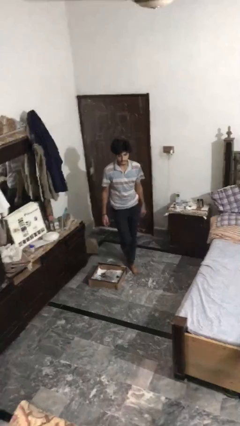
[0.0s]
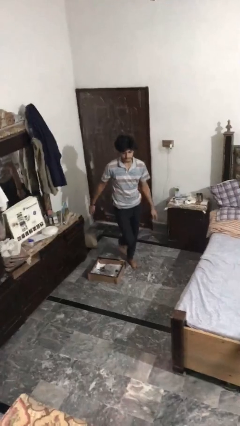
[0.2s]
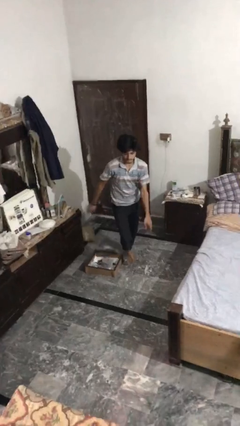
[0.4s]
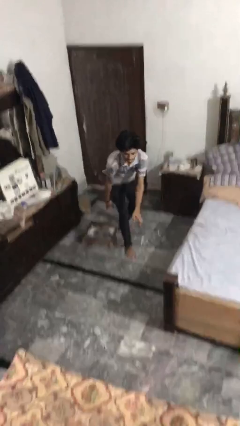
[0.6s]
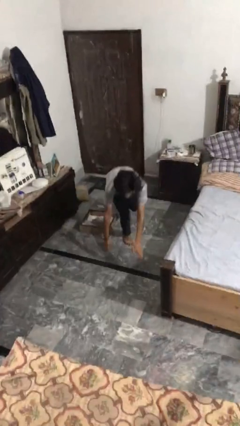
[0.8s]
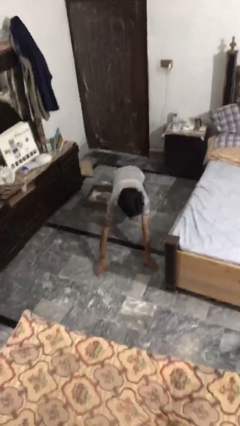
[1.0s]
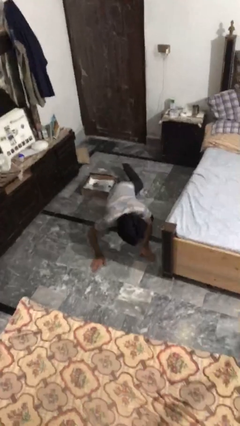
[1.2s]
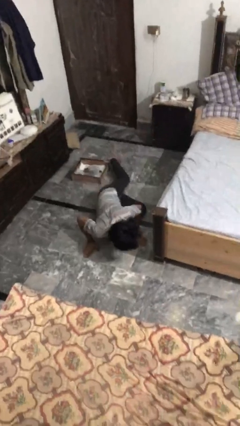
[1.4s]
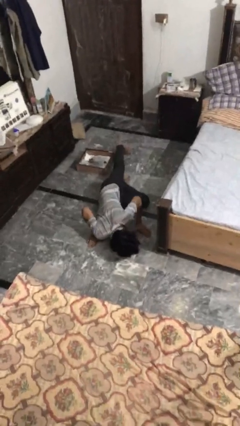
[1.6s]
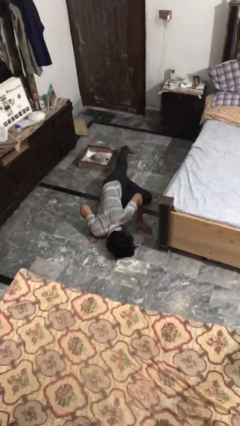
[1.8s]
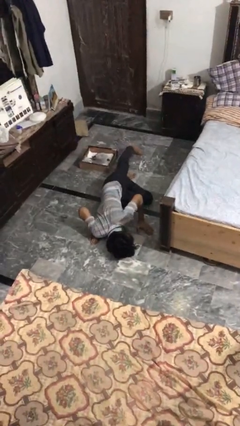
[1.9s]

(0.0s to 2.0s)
person trips on object on floor

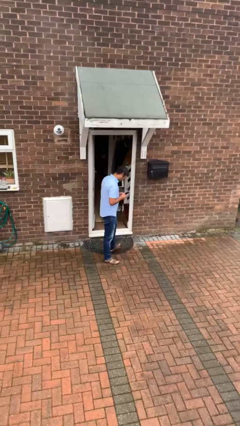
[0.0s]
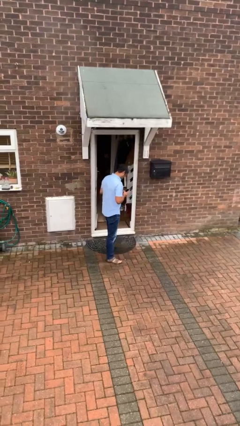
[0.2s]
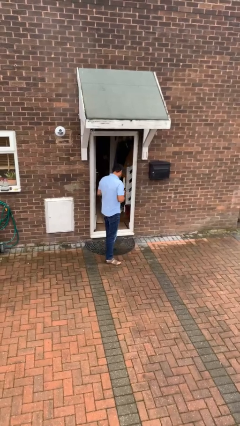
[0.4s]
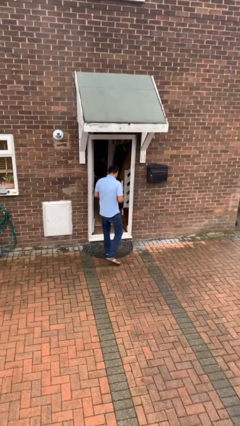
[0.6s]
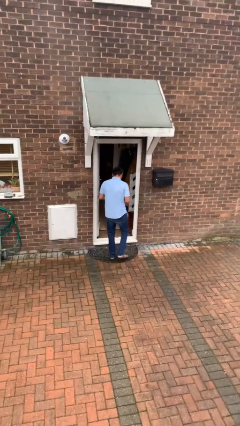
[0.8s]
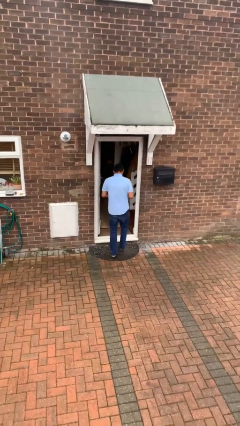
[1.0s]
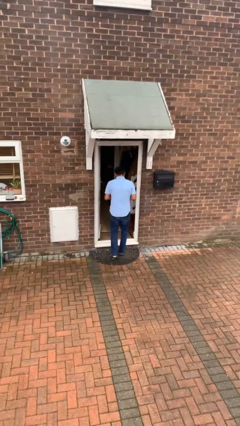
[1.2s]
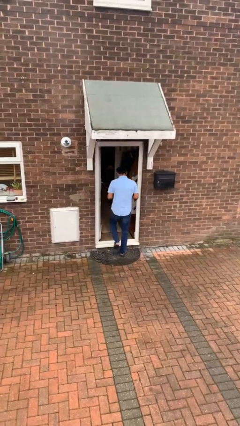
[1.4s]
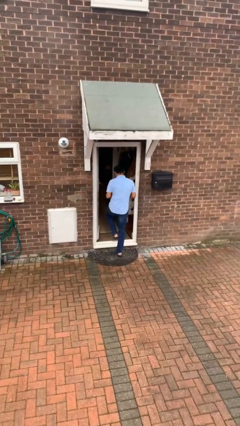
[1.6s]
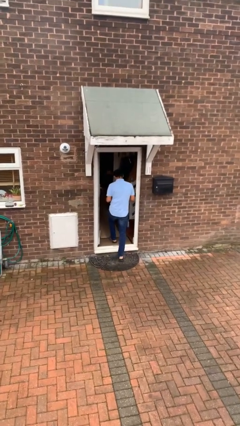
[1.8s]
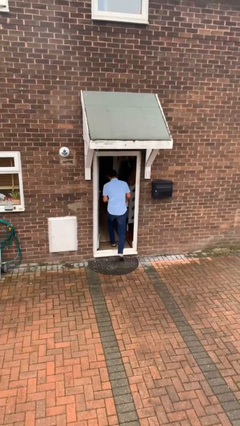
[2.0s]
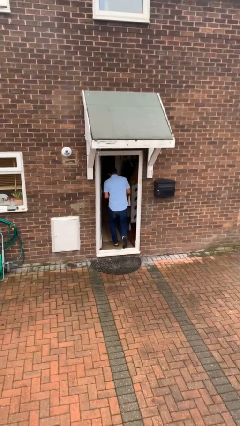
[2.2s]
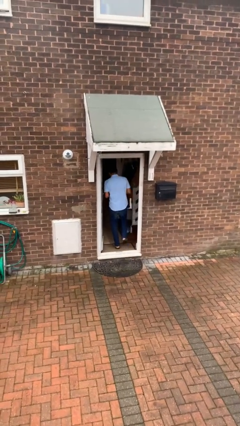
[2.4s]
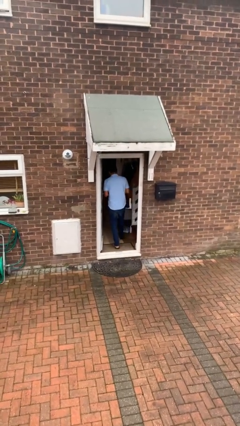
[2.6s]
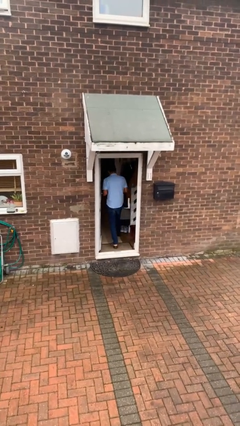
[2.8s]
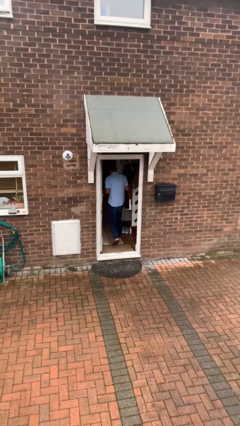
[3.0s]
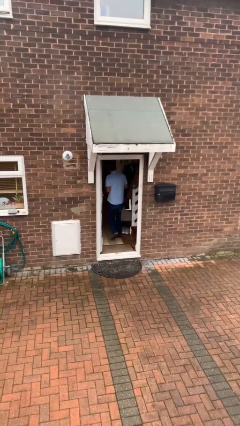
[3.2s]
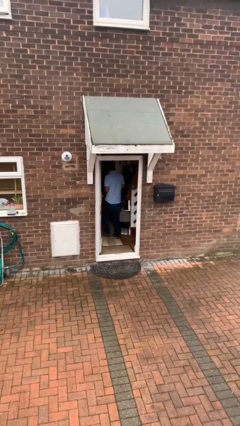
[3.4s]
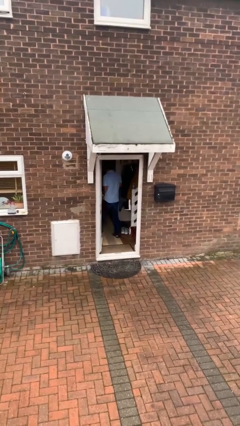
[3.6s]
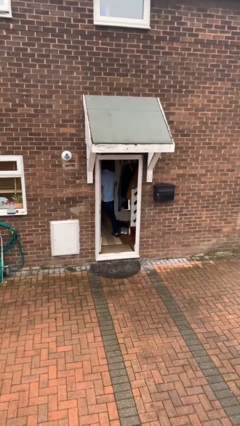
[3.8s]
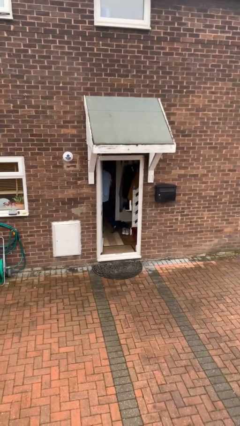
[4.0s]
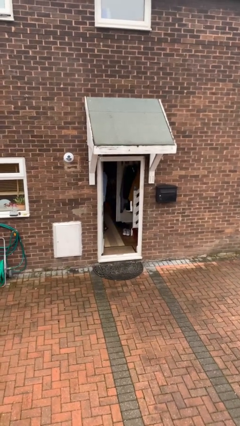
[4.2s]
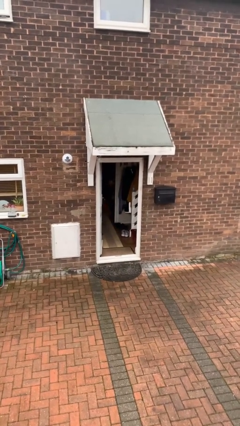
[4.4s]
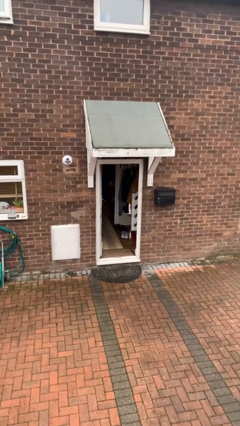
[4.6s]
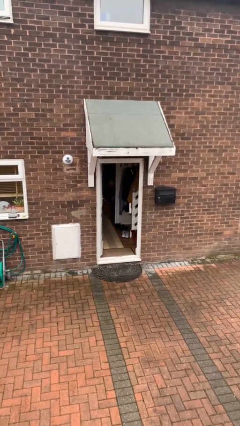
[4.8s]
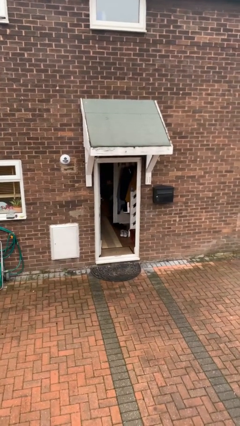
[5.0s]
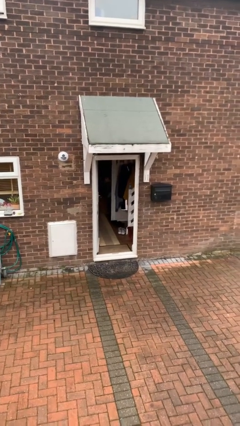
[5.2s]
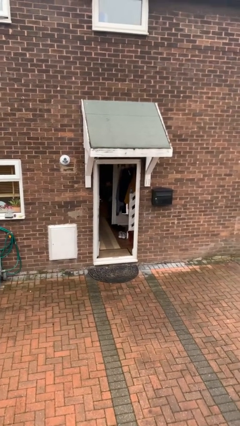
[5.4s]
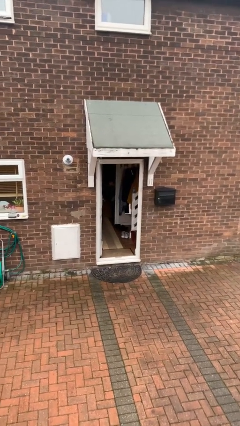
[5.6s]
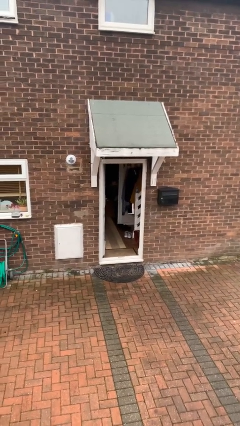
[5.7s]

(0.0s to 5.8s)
person exits scene through structure

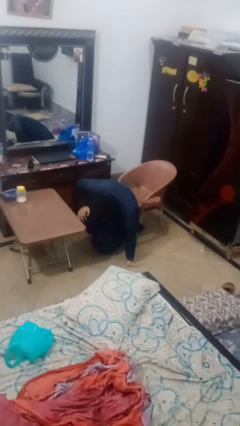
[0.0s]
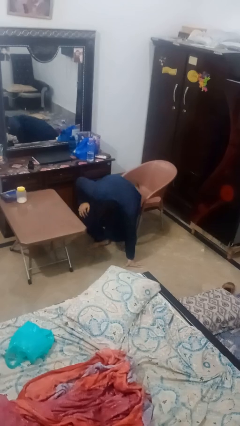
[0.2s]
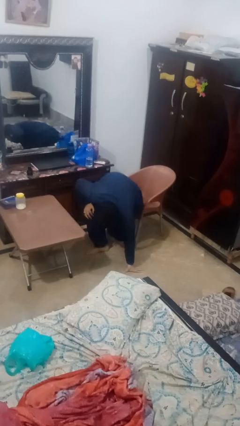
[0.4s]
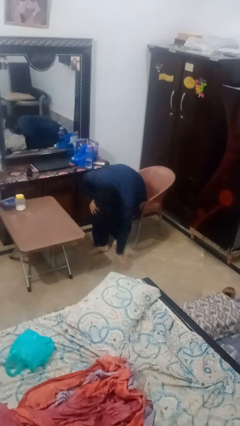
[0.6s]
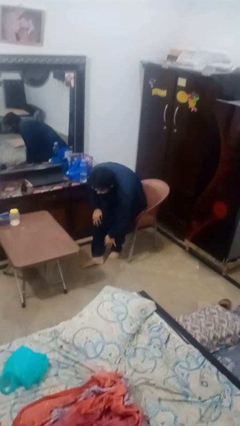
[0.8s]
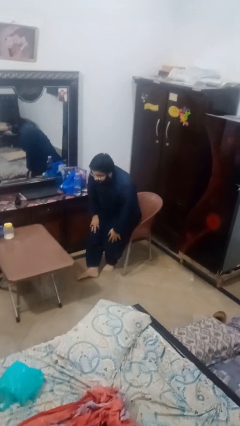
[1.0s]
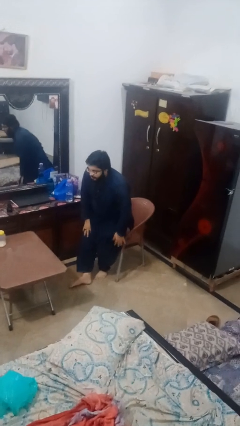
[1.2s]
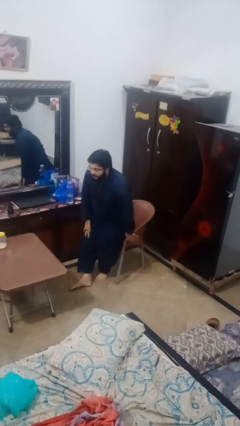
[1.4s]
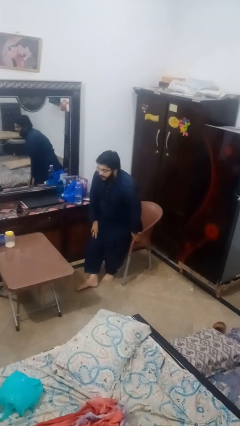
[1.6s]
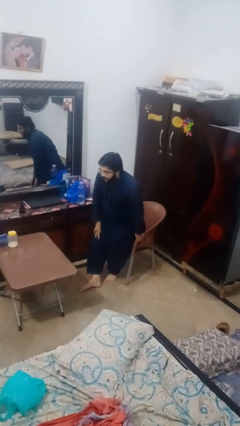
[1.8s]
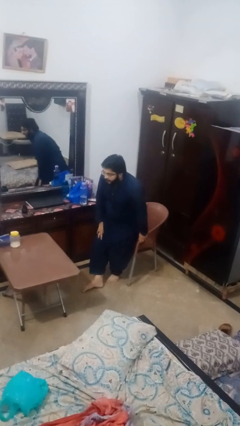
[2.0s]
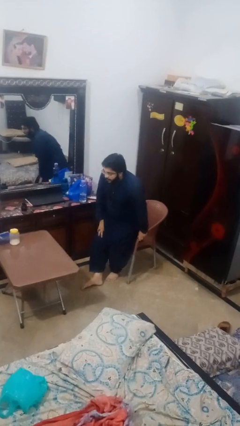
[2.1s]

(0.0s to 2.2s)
person stands up from floor

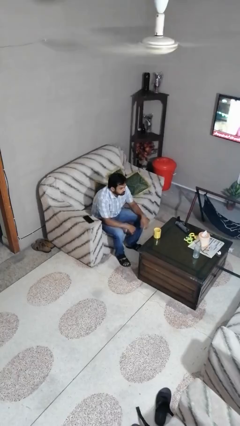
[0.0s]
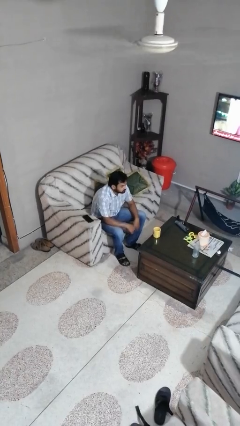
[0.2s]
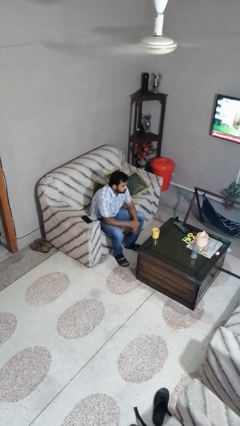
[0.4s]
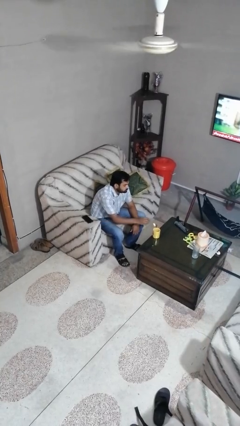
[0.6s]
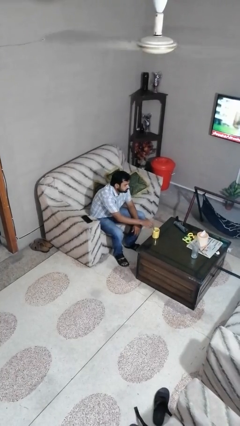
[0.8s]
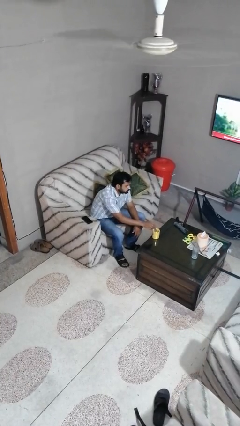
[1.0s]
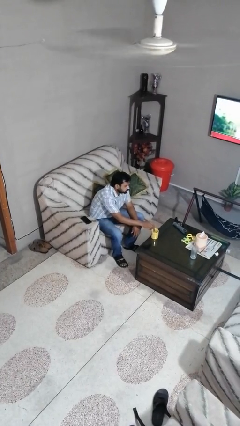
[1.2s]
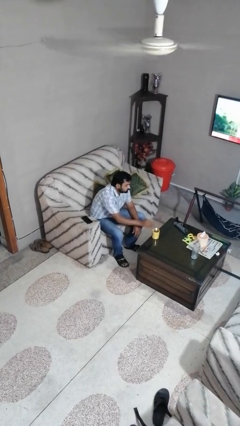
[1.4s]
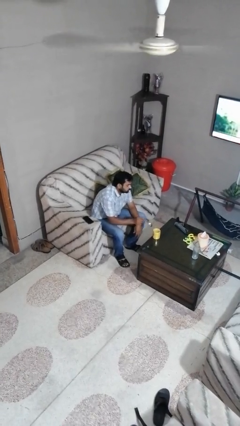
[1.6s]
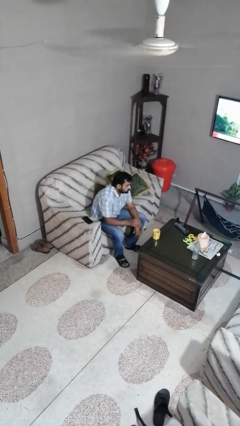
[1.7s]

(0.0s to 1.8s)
person stirs mug

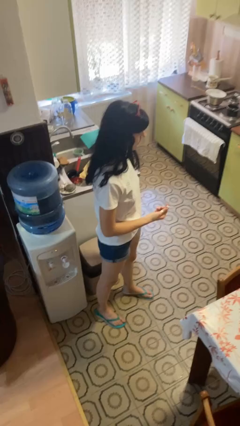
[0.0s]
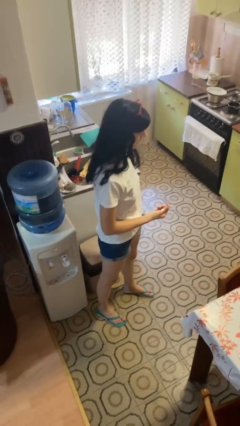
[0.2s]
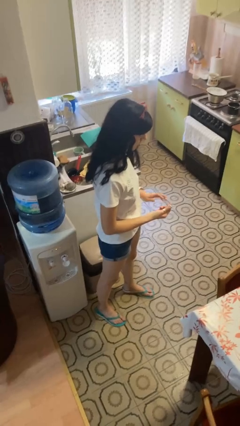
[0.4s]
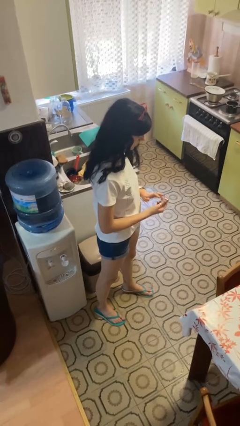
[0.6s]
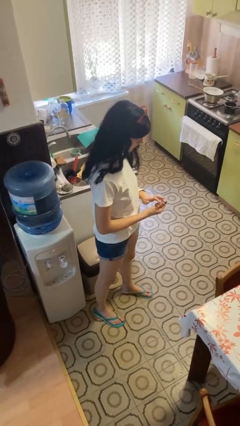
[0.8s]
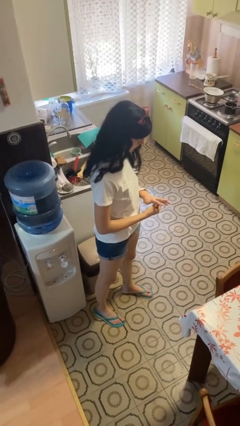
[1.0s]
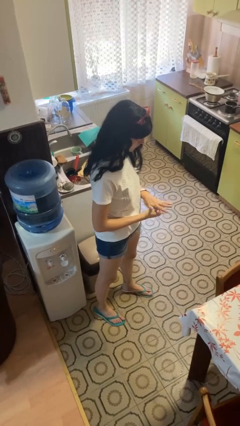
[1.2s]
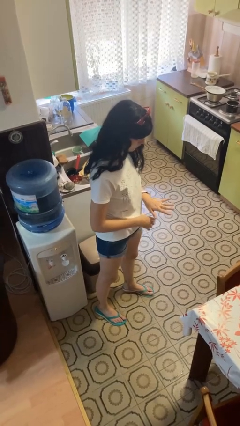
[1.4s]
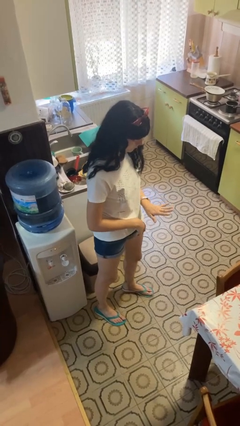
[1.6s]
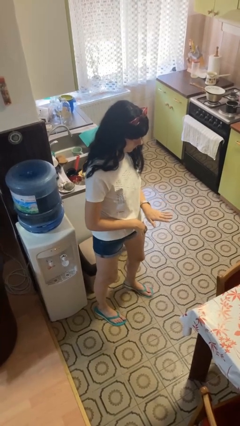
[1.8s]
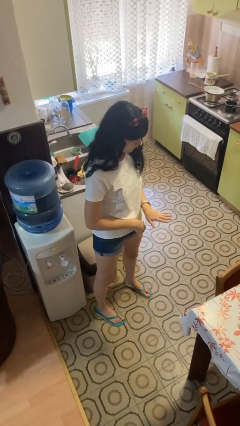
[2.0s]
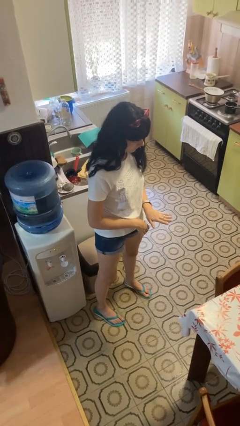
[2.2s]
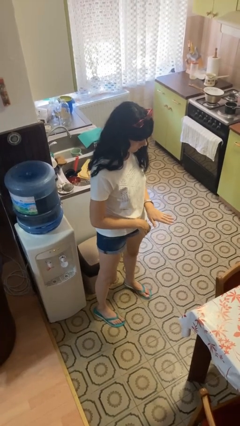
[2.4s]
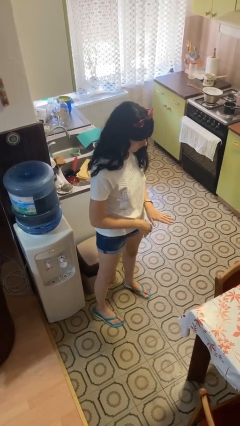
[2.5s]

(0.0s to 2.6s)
person puts on ring

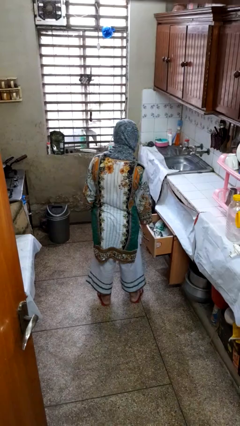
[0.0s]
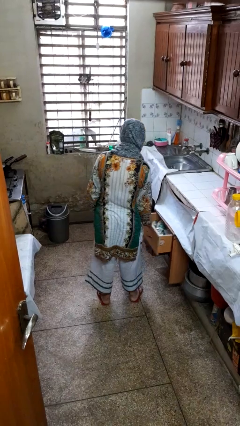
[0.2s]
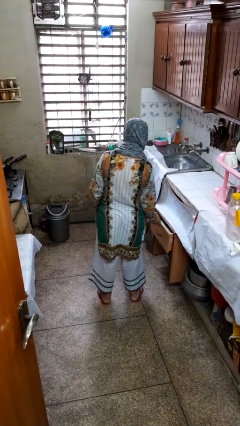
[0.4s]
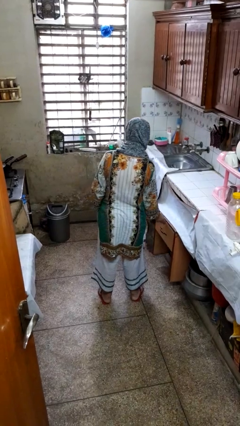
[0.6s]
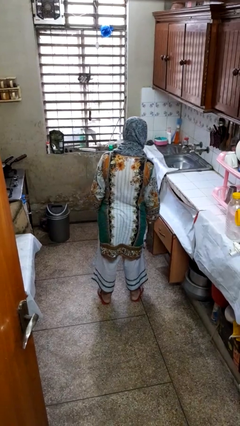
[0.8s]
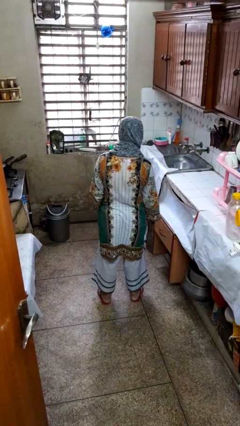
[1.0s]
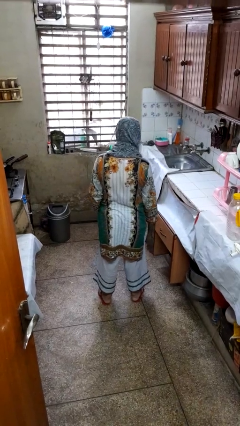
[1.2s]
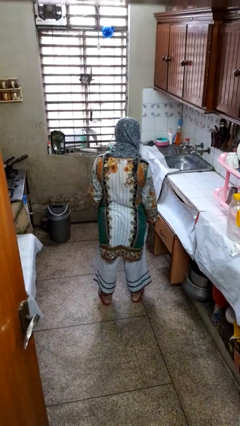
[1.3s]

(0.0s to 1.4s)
person closes kitchen drawer

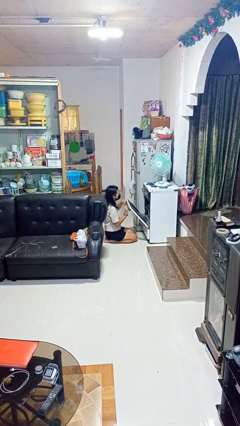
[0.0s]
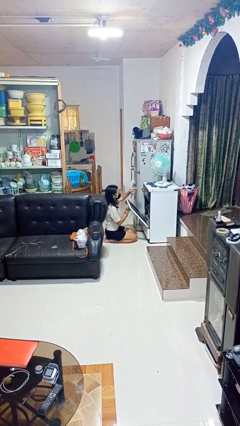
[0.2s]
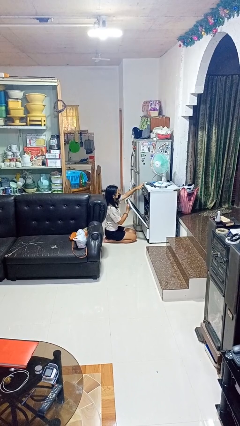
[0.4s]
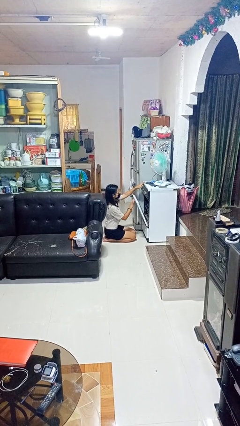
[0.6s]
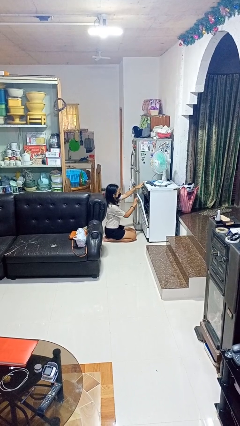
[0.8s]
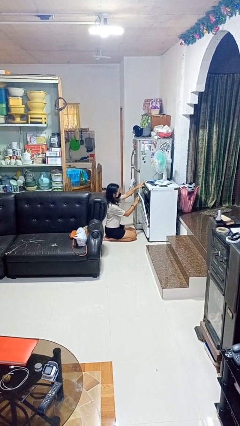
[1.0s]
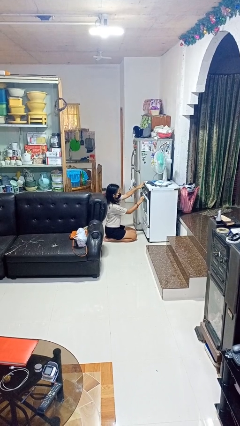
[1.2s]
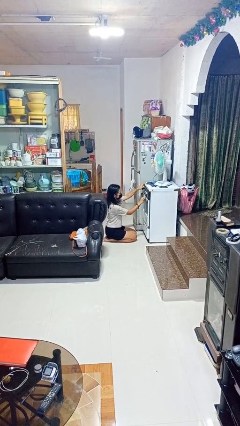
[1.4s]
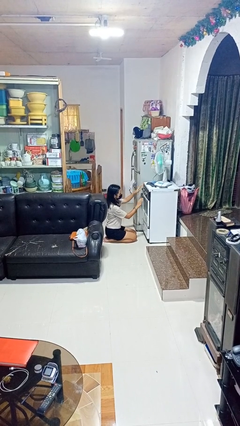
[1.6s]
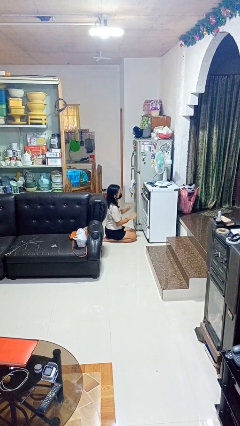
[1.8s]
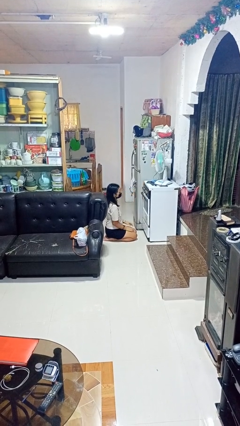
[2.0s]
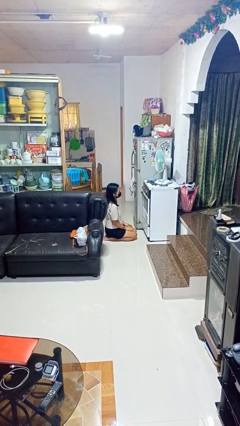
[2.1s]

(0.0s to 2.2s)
person closes oven door
